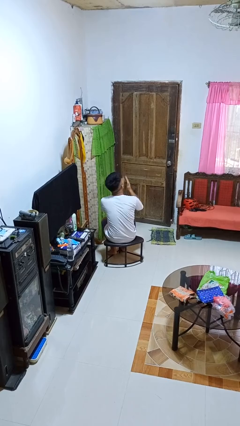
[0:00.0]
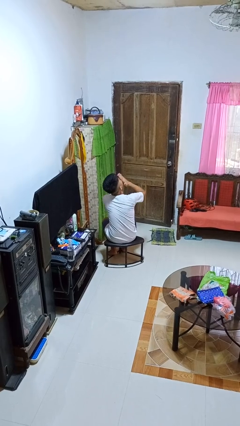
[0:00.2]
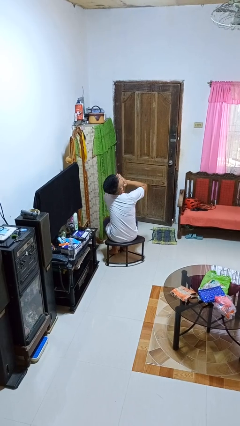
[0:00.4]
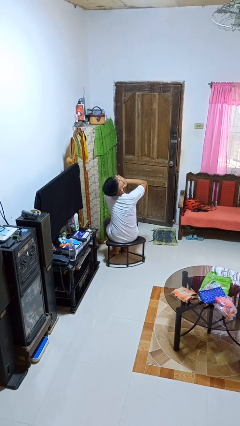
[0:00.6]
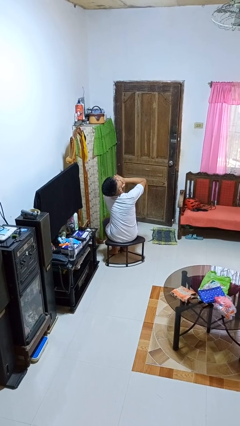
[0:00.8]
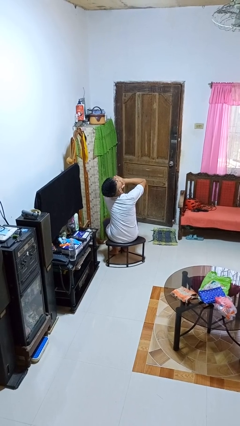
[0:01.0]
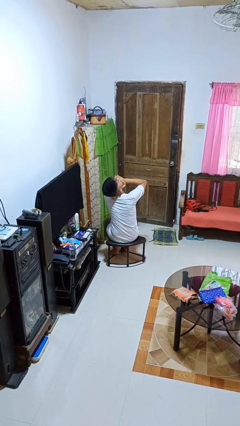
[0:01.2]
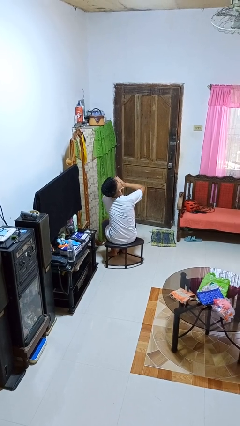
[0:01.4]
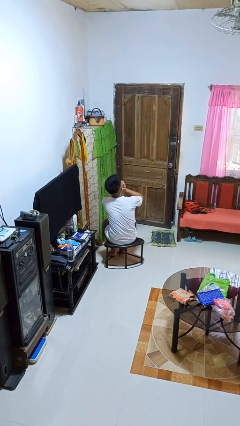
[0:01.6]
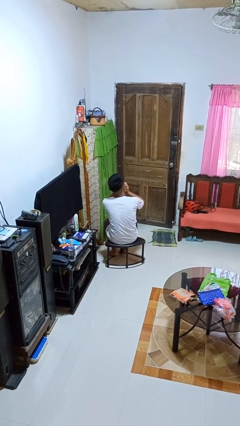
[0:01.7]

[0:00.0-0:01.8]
person yawns

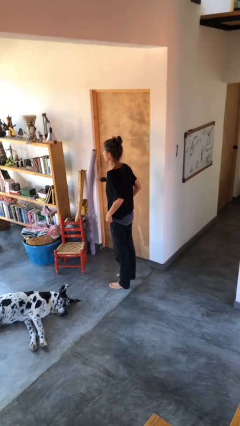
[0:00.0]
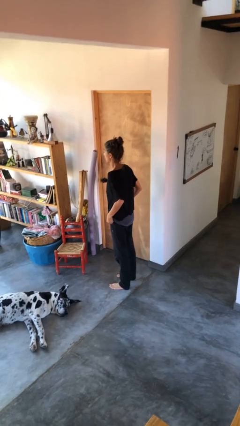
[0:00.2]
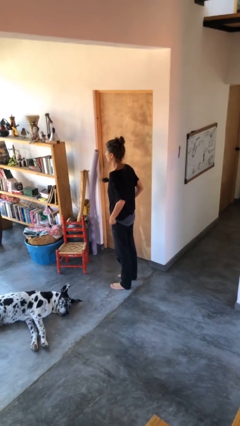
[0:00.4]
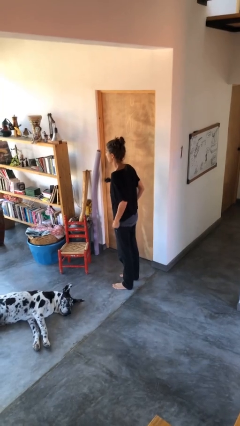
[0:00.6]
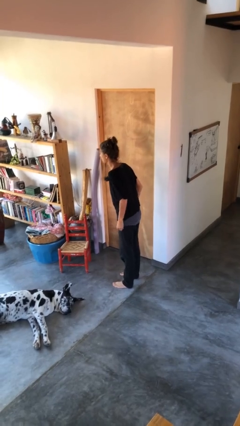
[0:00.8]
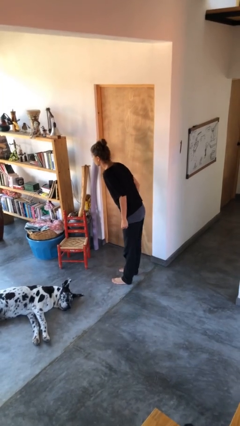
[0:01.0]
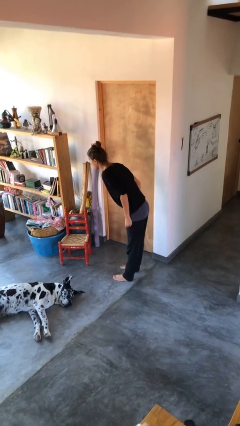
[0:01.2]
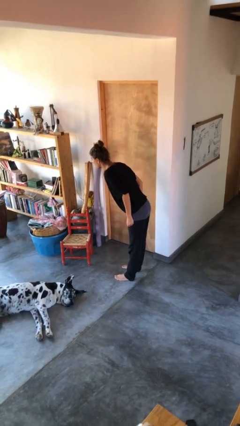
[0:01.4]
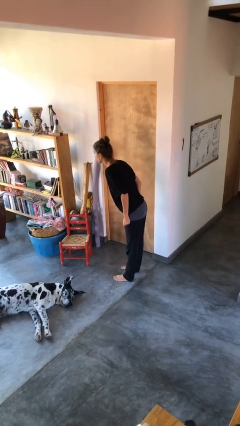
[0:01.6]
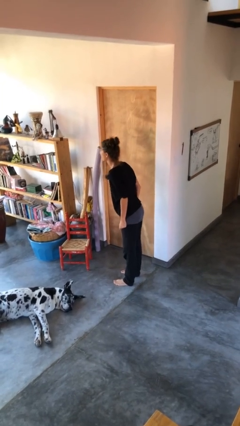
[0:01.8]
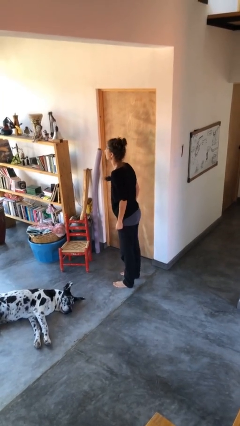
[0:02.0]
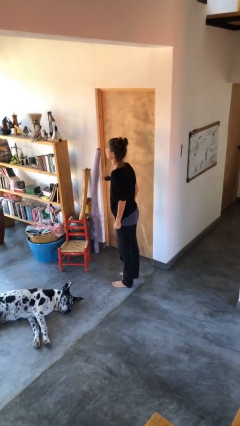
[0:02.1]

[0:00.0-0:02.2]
person bows

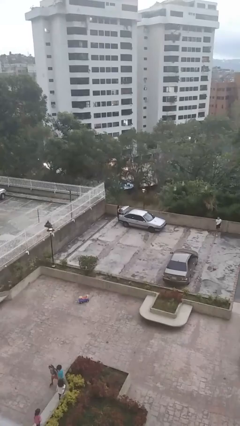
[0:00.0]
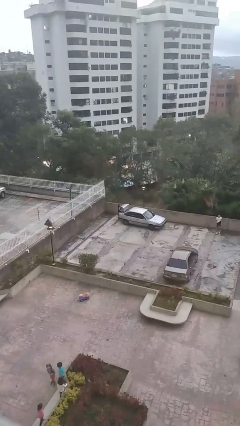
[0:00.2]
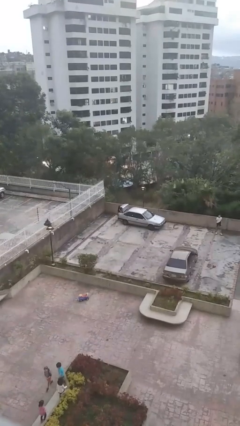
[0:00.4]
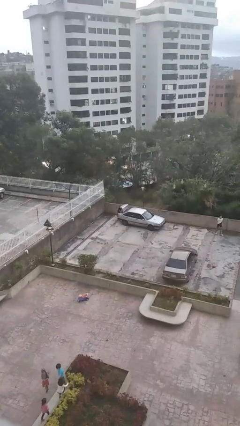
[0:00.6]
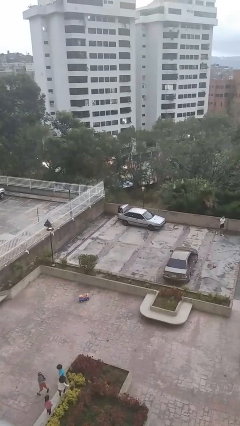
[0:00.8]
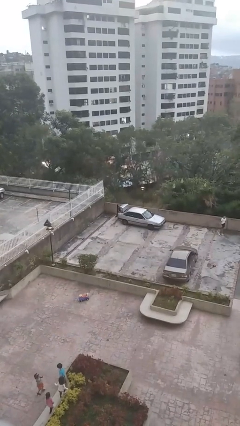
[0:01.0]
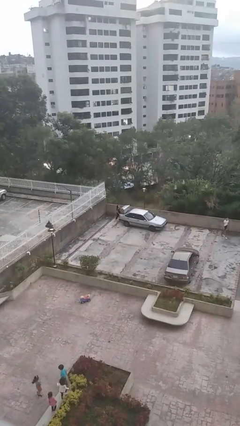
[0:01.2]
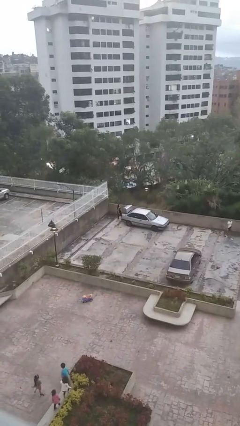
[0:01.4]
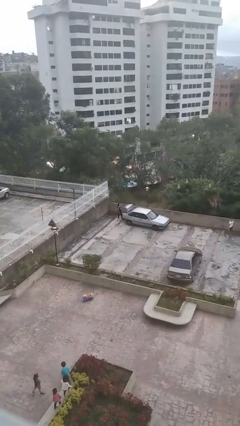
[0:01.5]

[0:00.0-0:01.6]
person loads car

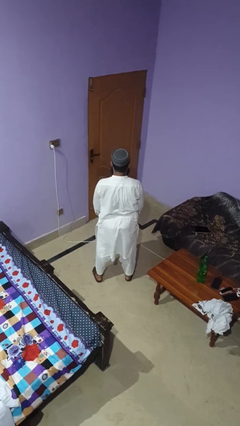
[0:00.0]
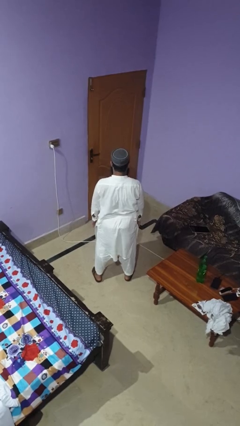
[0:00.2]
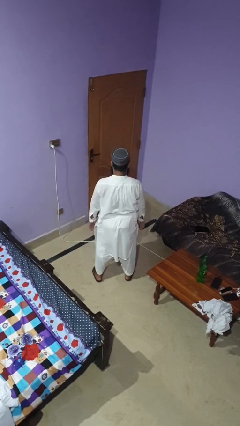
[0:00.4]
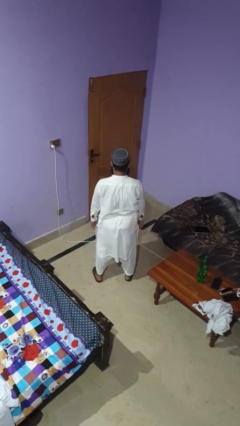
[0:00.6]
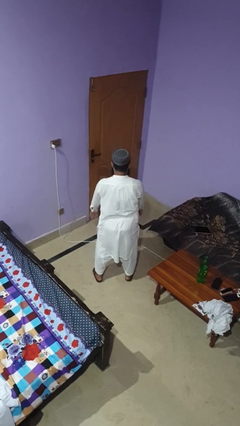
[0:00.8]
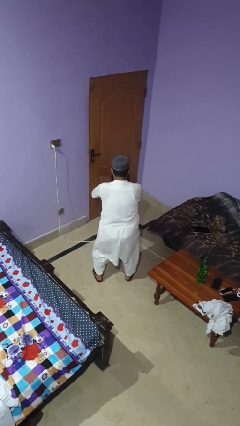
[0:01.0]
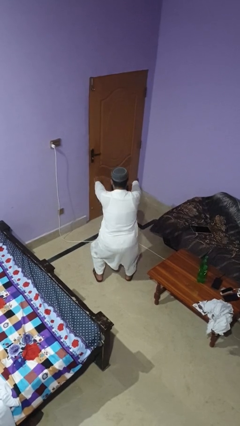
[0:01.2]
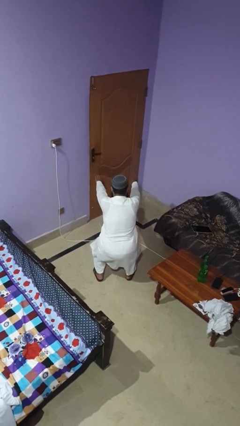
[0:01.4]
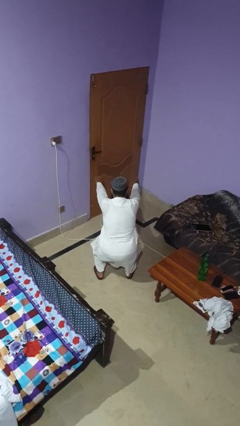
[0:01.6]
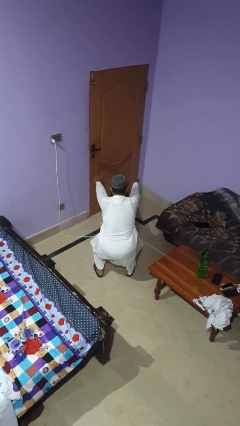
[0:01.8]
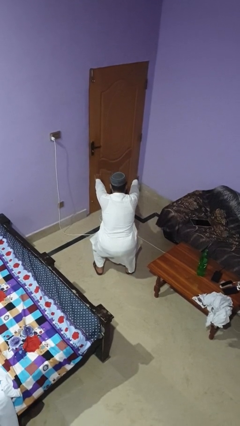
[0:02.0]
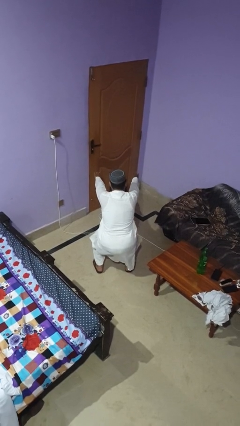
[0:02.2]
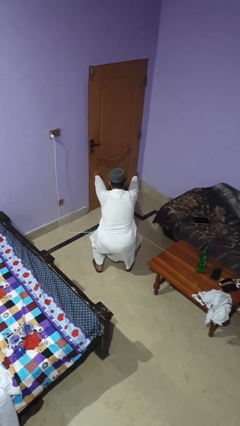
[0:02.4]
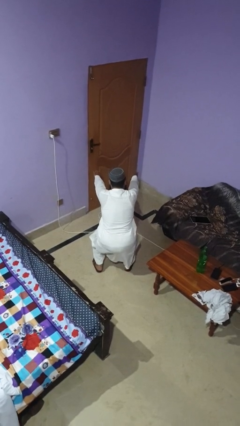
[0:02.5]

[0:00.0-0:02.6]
person squats

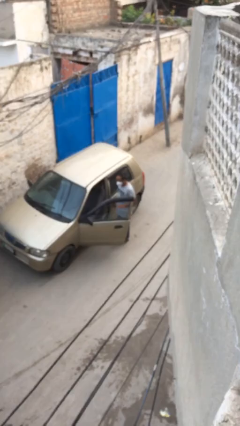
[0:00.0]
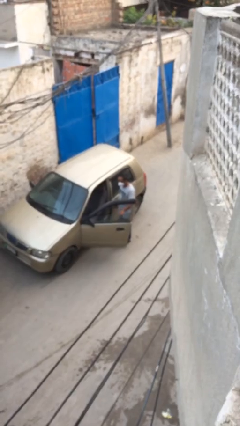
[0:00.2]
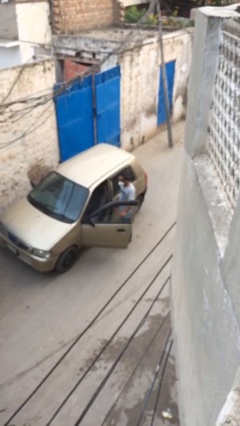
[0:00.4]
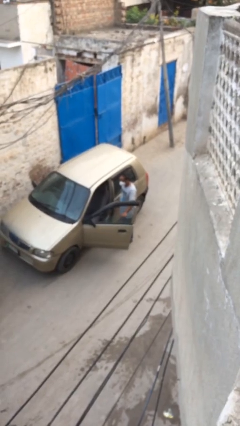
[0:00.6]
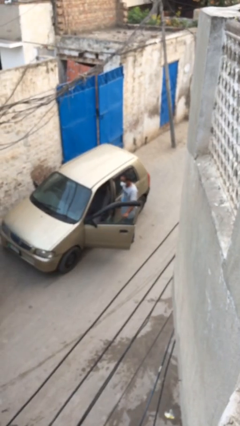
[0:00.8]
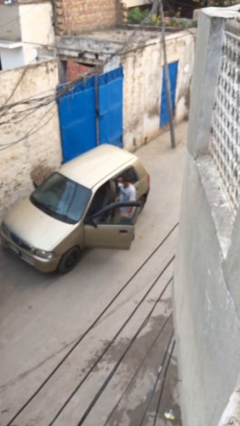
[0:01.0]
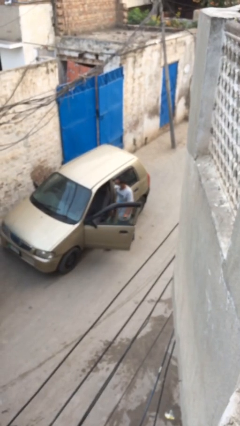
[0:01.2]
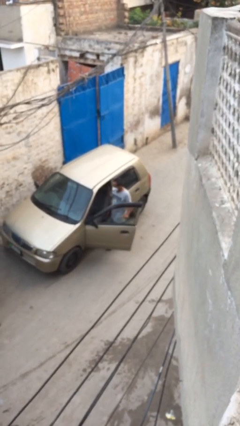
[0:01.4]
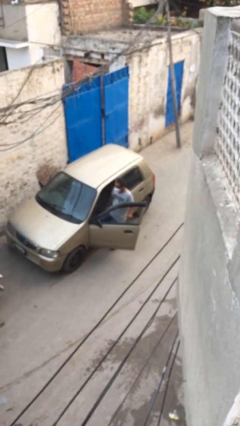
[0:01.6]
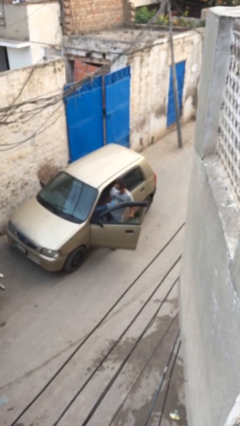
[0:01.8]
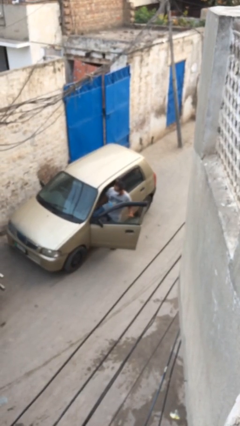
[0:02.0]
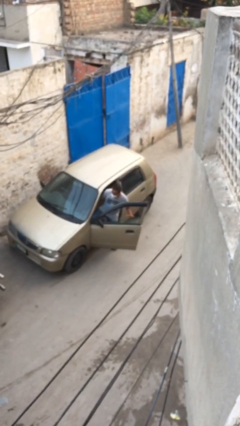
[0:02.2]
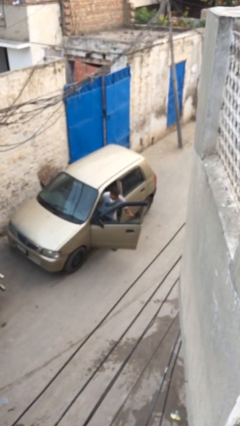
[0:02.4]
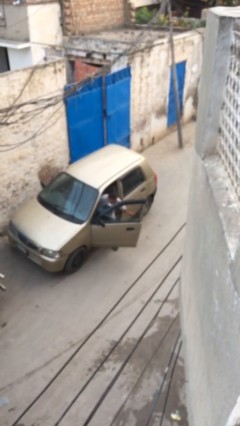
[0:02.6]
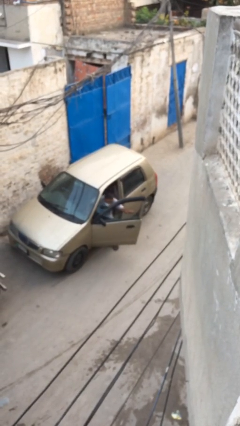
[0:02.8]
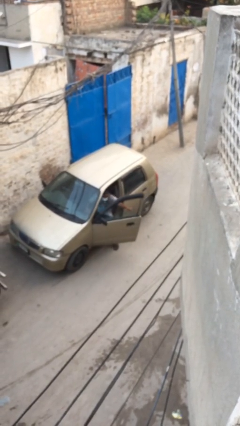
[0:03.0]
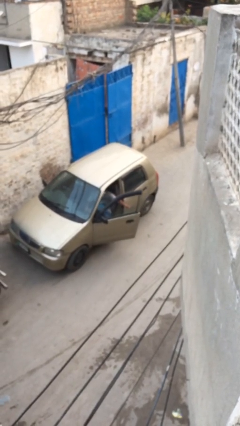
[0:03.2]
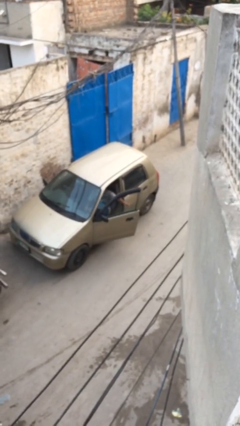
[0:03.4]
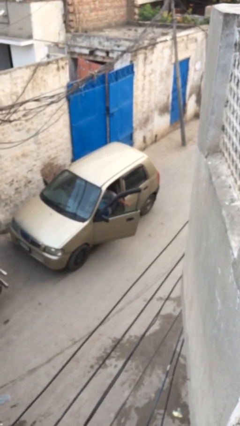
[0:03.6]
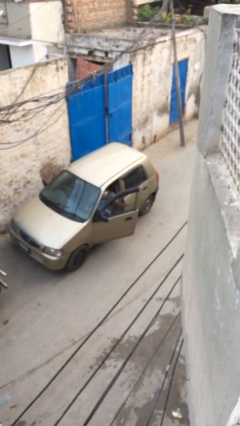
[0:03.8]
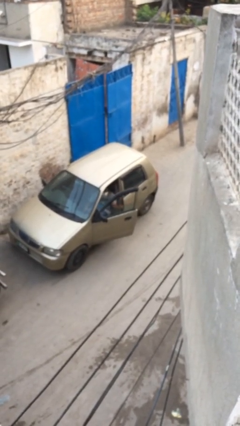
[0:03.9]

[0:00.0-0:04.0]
person enters car

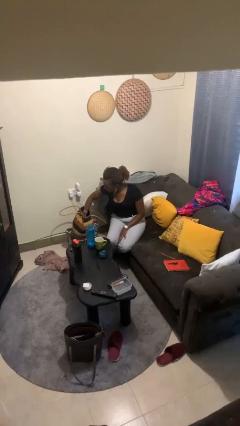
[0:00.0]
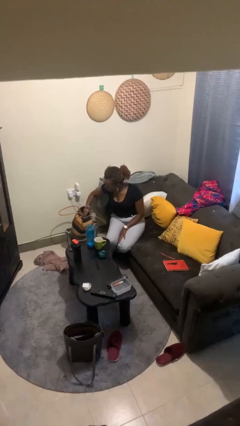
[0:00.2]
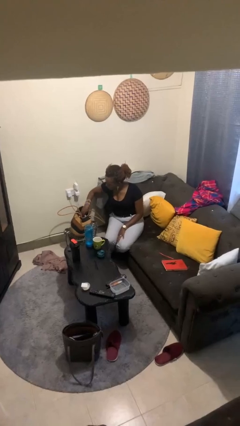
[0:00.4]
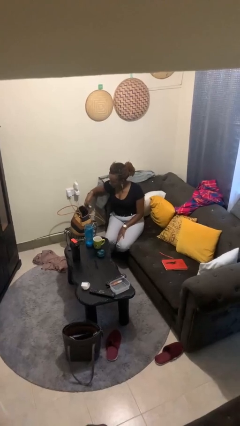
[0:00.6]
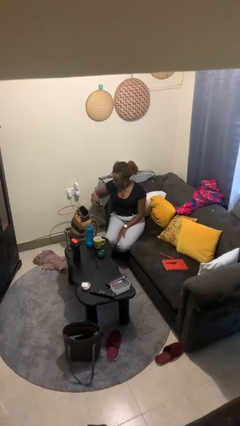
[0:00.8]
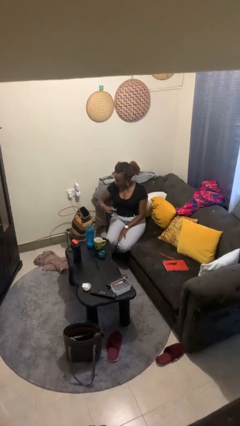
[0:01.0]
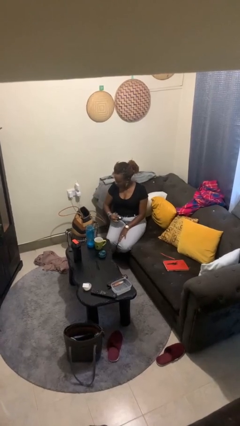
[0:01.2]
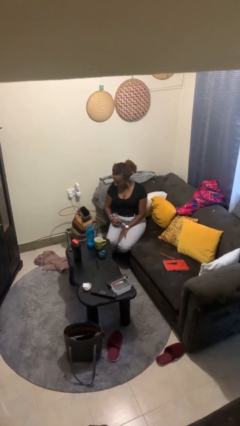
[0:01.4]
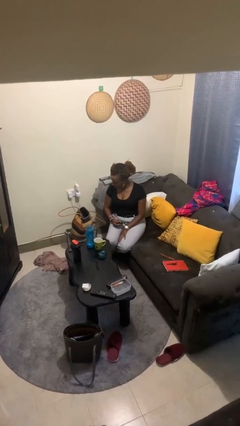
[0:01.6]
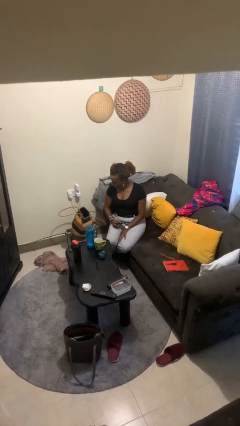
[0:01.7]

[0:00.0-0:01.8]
person takes object from purse

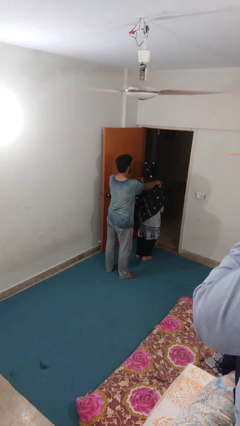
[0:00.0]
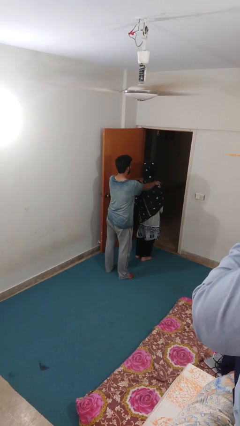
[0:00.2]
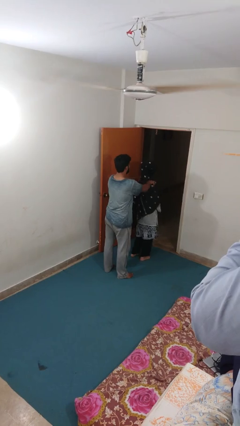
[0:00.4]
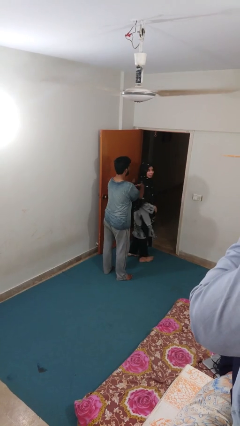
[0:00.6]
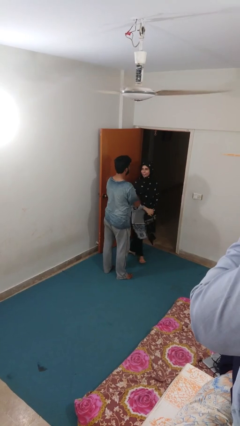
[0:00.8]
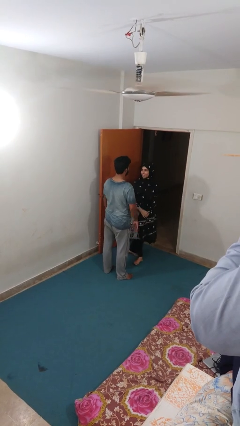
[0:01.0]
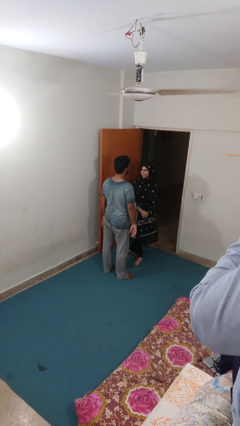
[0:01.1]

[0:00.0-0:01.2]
person spins person around

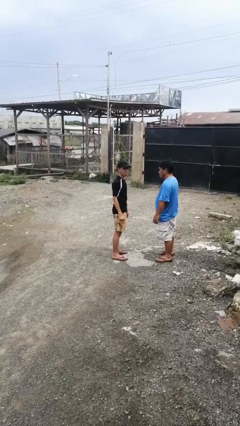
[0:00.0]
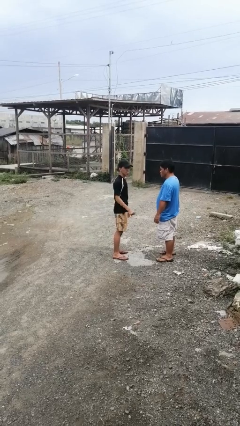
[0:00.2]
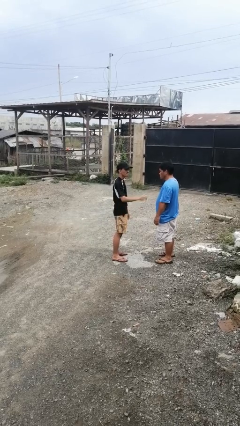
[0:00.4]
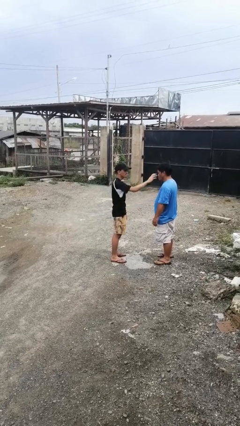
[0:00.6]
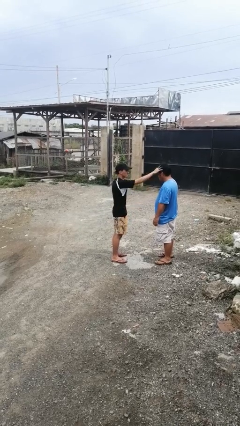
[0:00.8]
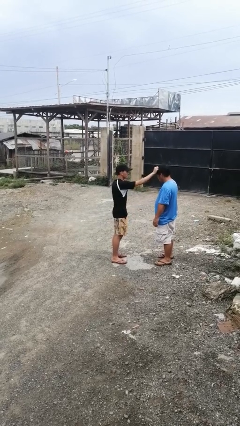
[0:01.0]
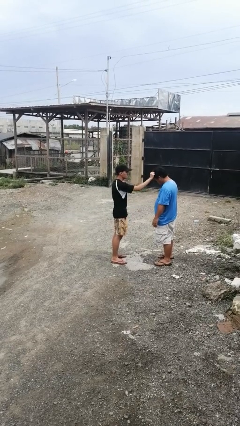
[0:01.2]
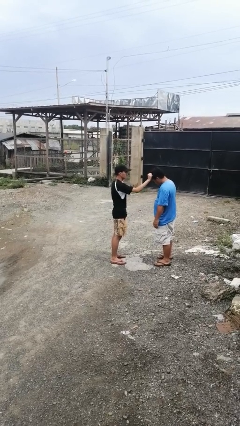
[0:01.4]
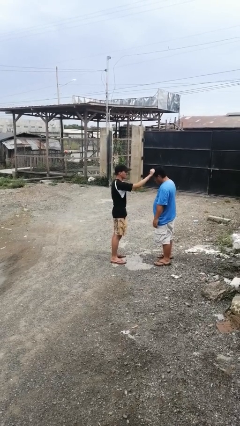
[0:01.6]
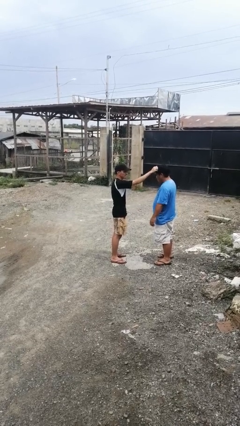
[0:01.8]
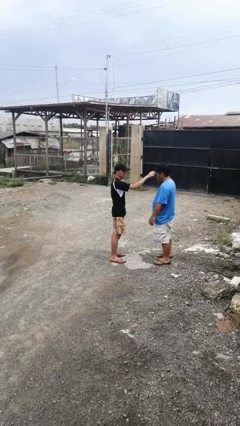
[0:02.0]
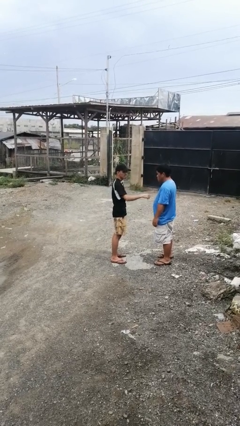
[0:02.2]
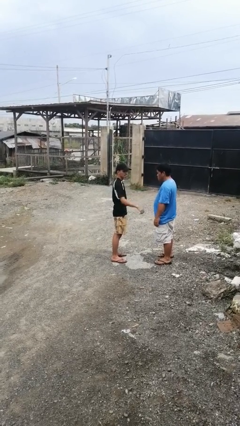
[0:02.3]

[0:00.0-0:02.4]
person grabs person by hair
